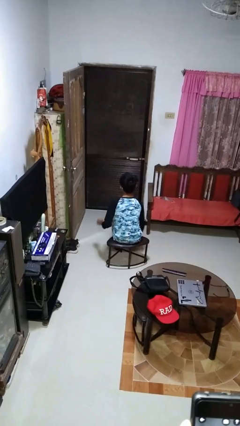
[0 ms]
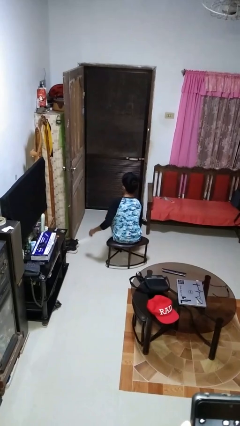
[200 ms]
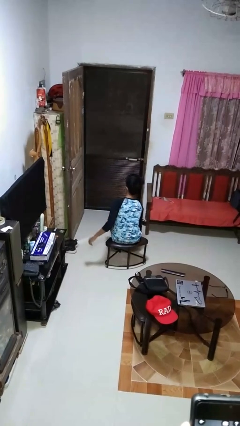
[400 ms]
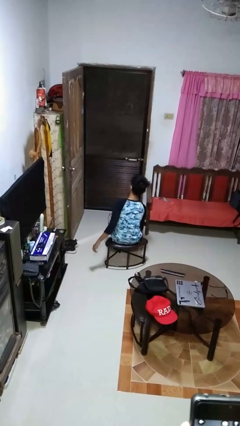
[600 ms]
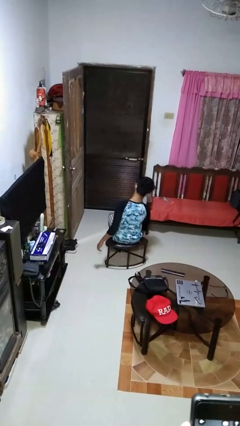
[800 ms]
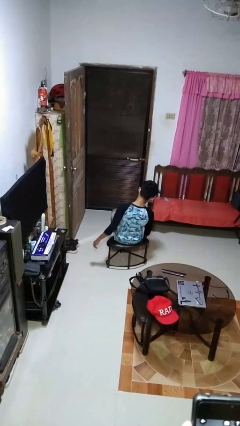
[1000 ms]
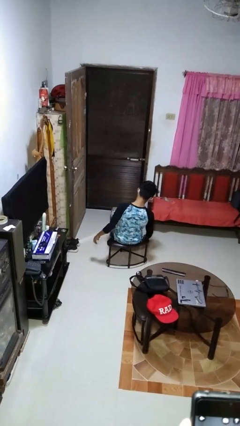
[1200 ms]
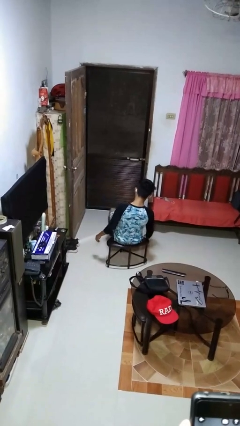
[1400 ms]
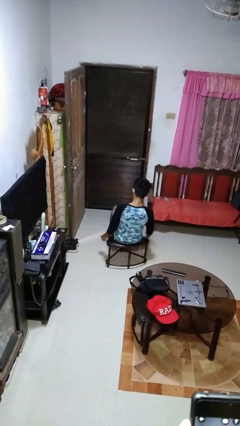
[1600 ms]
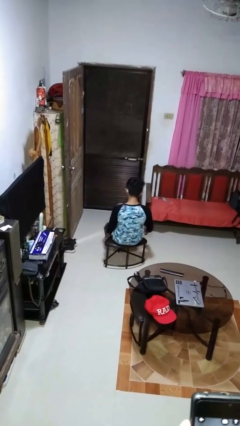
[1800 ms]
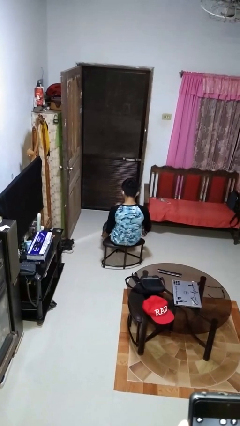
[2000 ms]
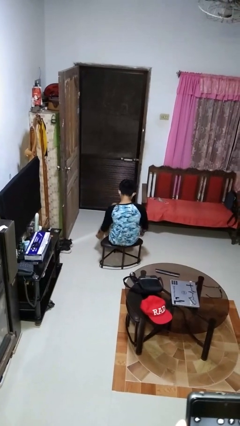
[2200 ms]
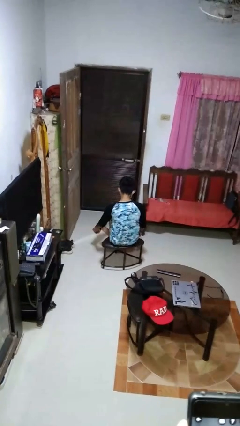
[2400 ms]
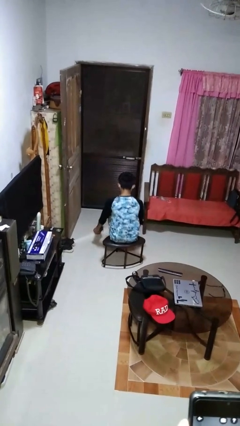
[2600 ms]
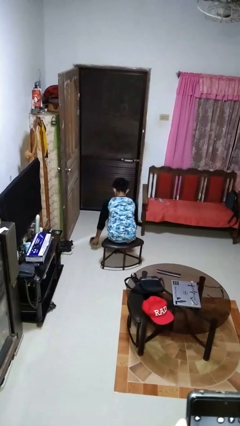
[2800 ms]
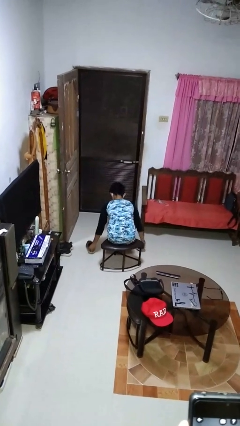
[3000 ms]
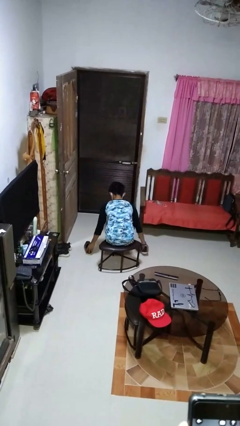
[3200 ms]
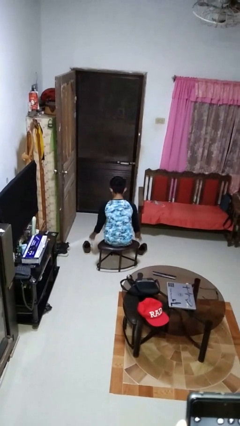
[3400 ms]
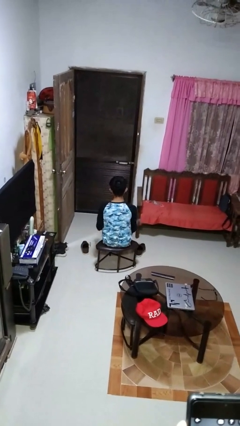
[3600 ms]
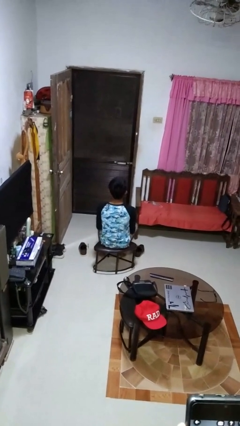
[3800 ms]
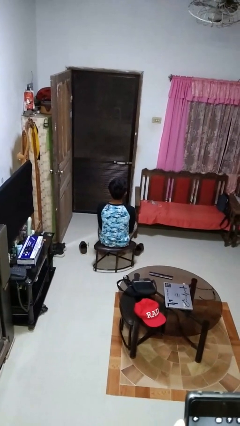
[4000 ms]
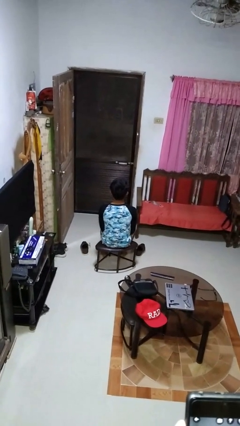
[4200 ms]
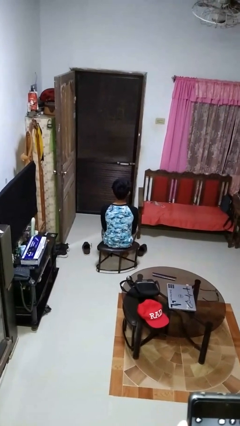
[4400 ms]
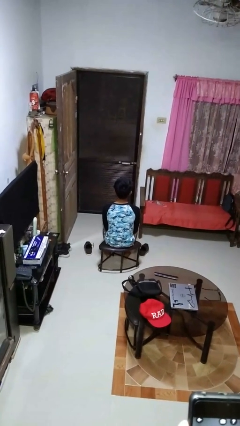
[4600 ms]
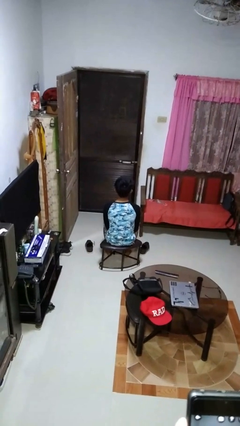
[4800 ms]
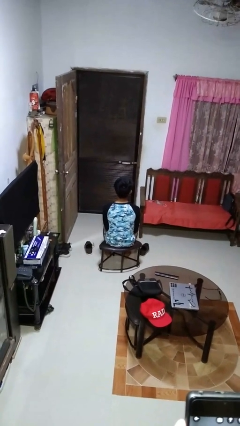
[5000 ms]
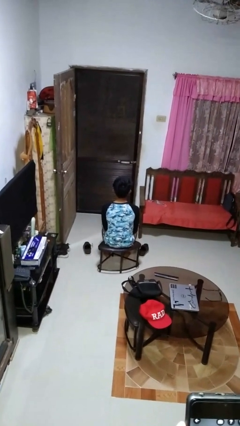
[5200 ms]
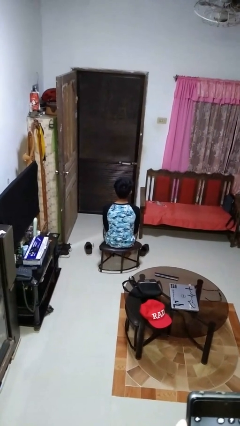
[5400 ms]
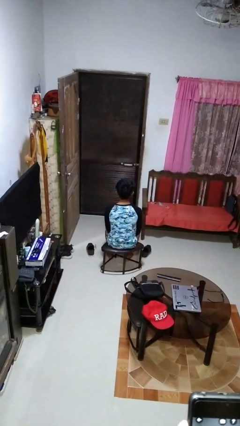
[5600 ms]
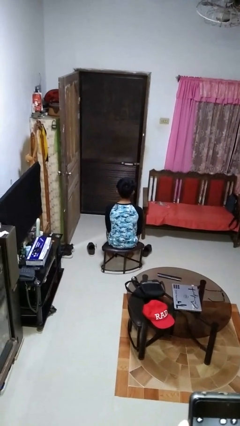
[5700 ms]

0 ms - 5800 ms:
person takes off shoes

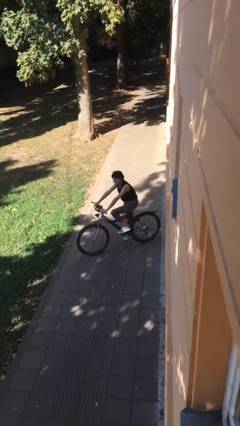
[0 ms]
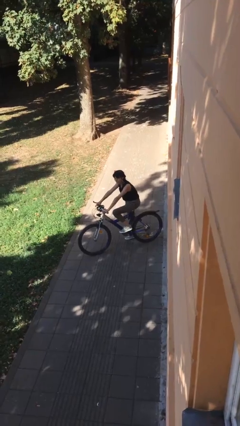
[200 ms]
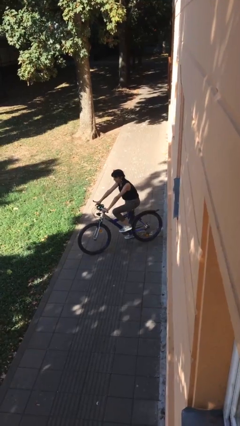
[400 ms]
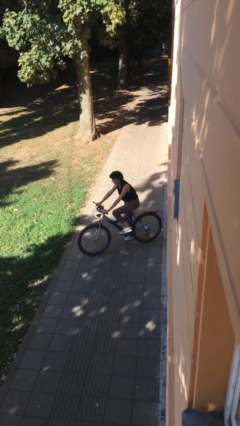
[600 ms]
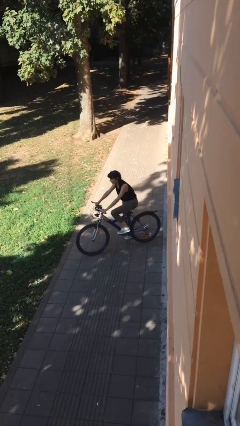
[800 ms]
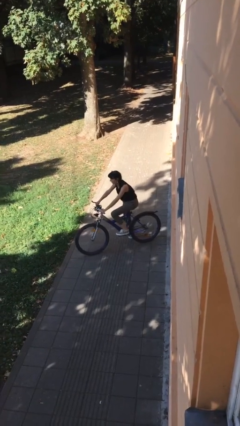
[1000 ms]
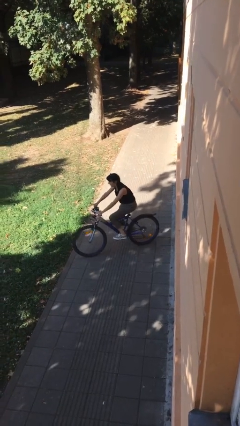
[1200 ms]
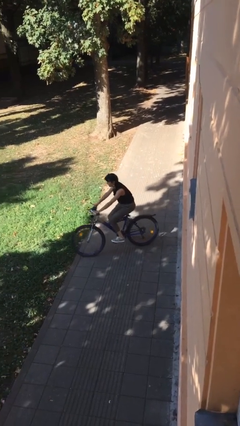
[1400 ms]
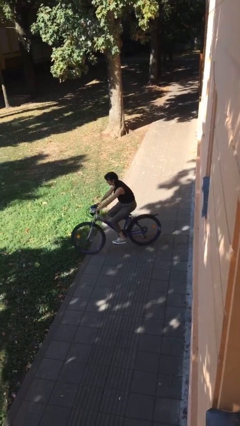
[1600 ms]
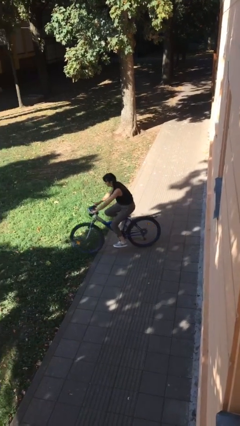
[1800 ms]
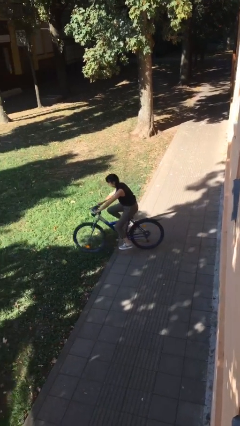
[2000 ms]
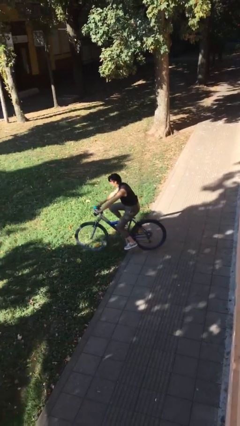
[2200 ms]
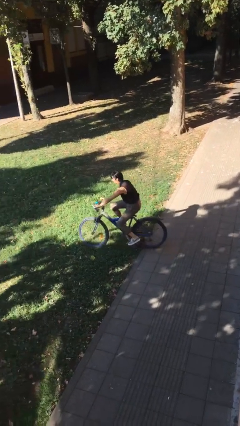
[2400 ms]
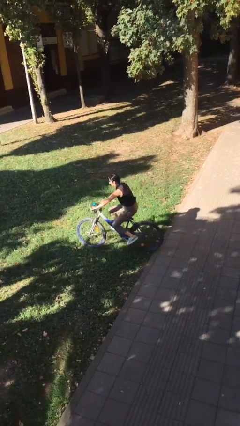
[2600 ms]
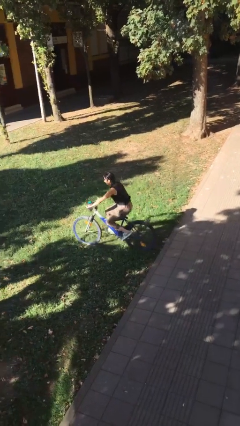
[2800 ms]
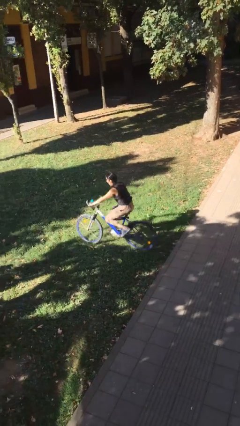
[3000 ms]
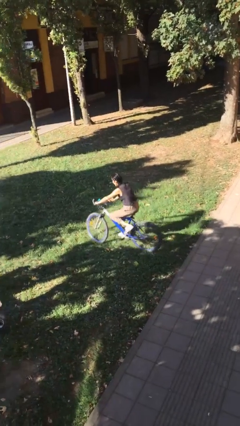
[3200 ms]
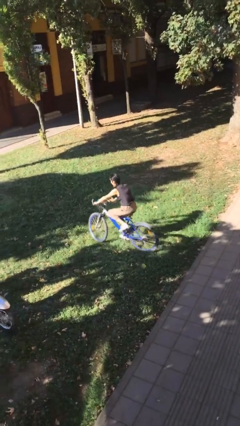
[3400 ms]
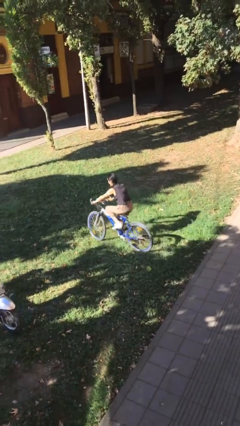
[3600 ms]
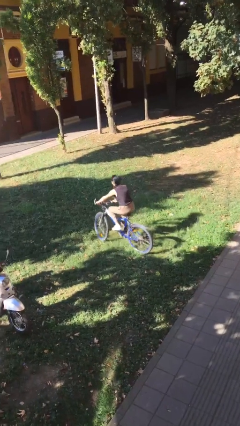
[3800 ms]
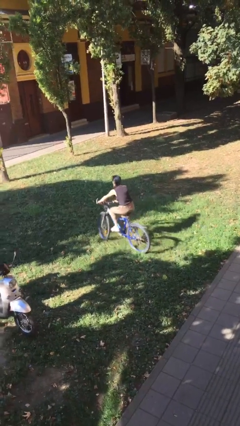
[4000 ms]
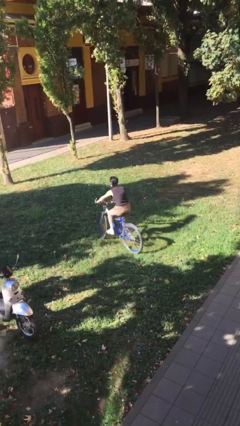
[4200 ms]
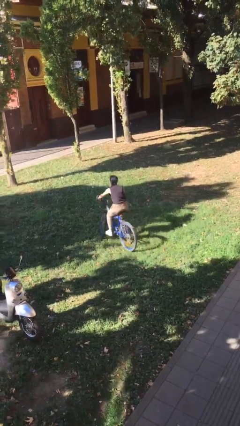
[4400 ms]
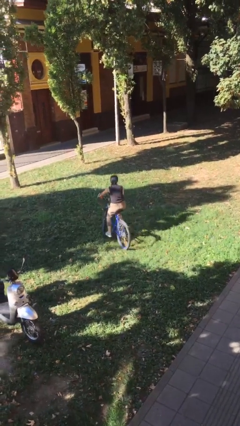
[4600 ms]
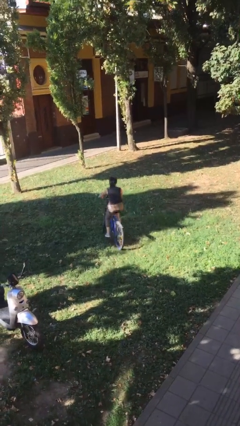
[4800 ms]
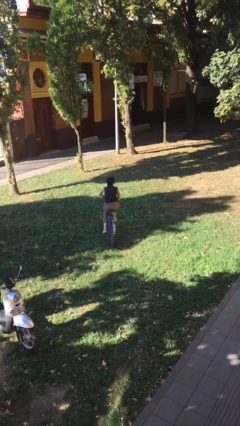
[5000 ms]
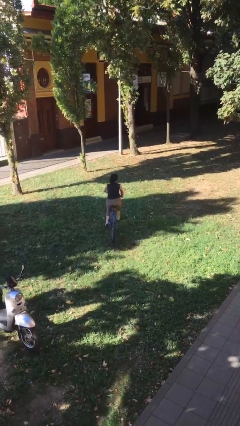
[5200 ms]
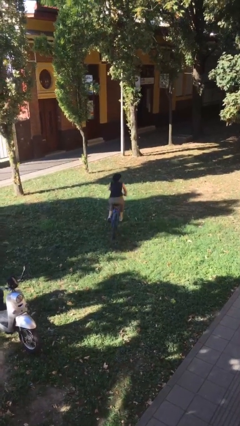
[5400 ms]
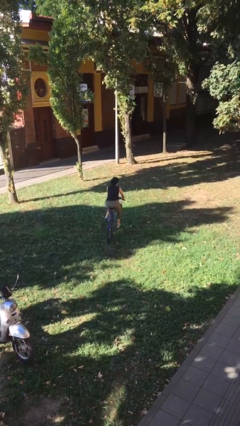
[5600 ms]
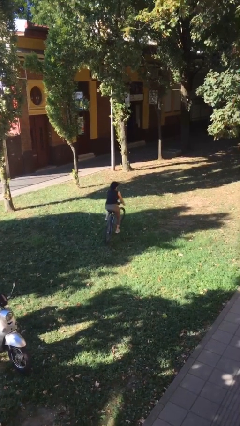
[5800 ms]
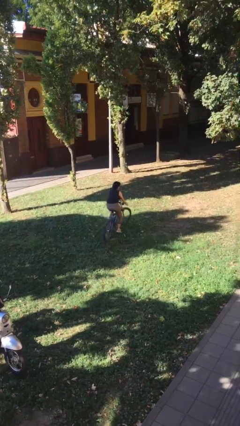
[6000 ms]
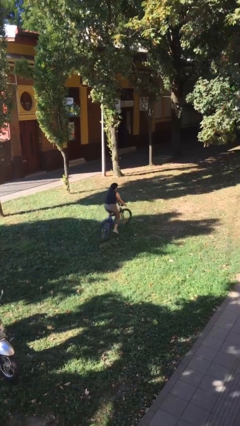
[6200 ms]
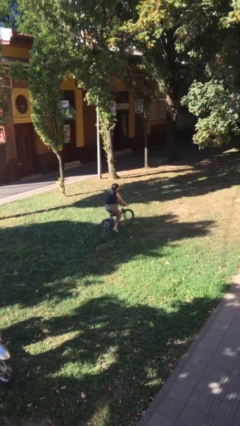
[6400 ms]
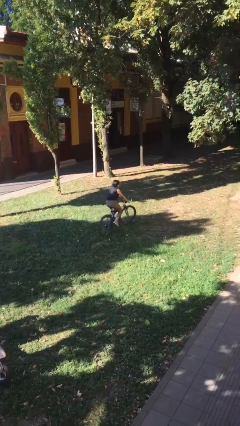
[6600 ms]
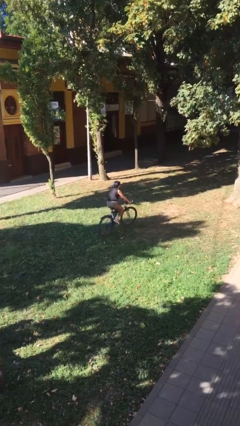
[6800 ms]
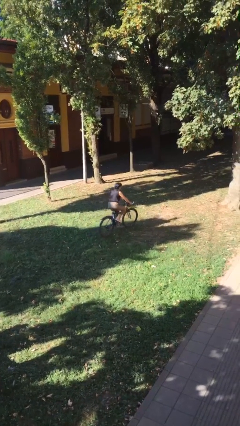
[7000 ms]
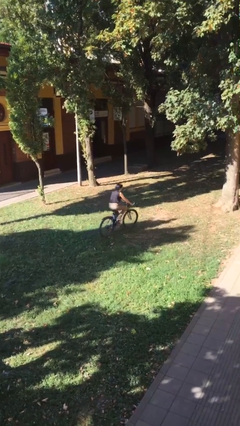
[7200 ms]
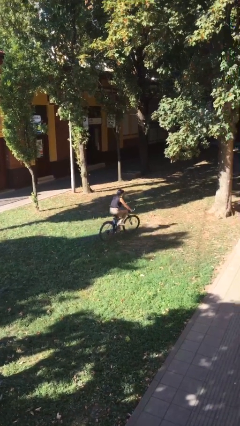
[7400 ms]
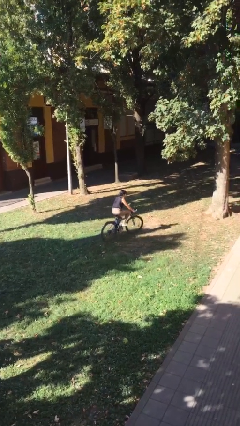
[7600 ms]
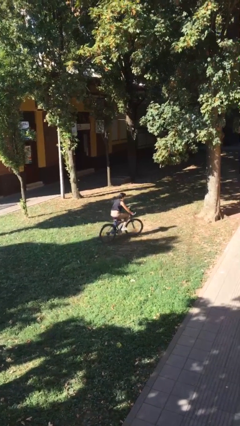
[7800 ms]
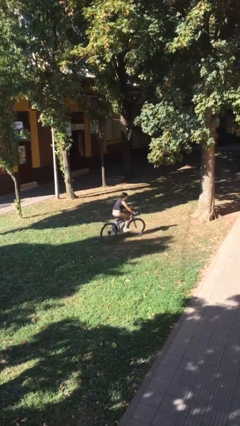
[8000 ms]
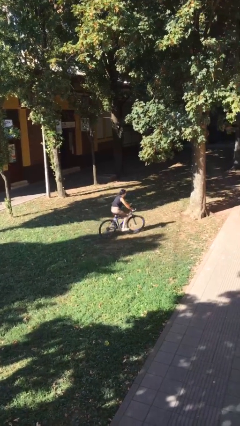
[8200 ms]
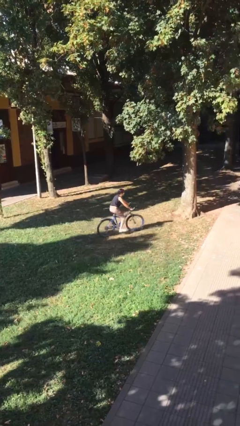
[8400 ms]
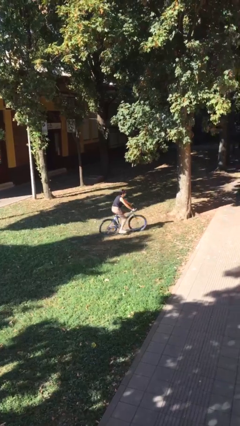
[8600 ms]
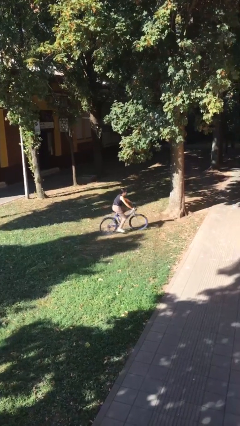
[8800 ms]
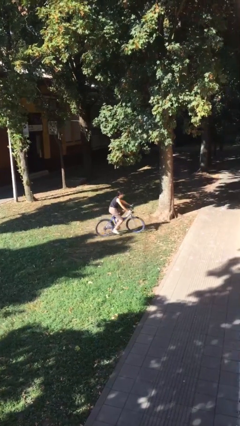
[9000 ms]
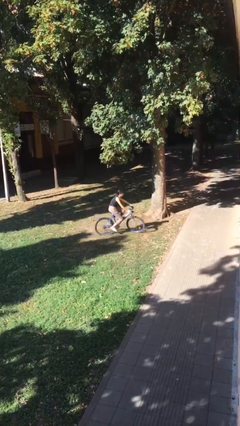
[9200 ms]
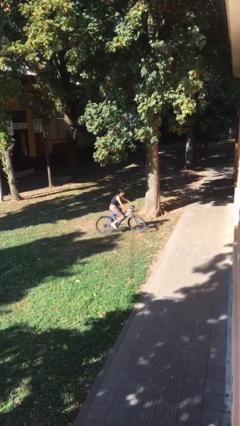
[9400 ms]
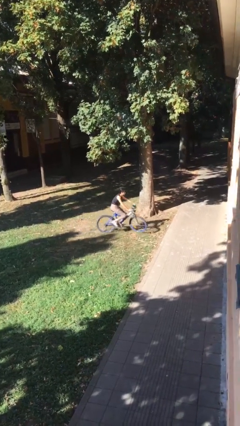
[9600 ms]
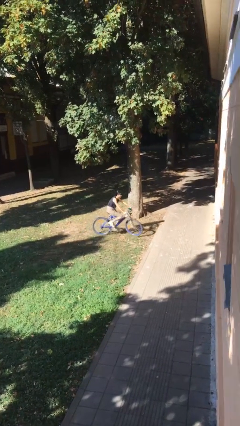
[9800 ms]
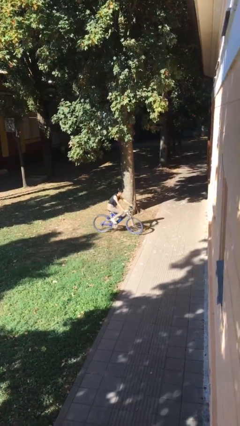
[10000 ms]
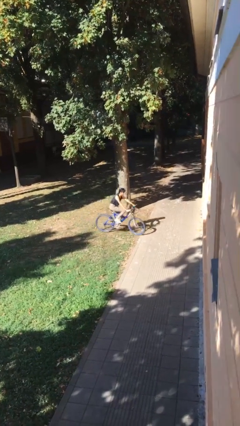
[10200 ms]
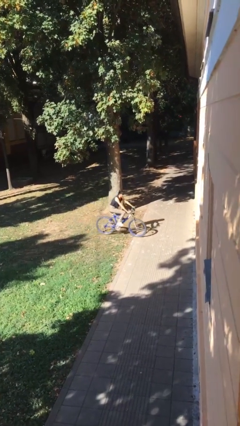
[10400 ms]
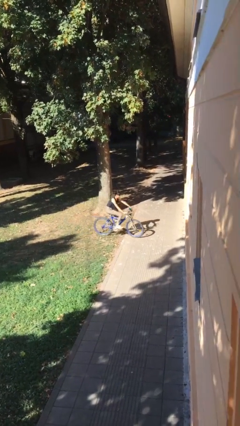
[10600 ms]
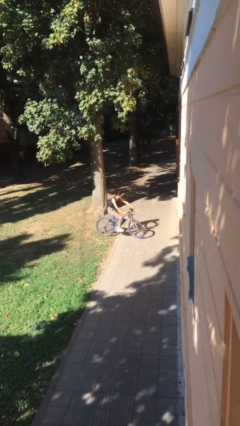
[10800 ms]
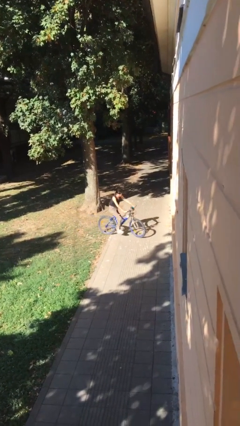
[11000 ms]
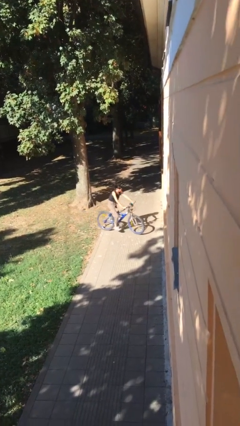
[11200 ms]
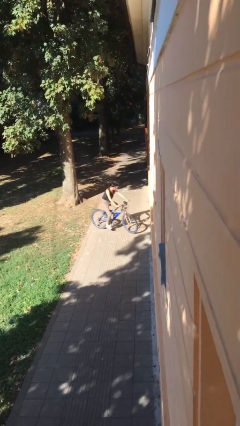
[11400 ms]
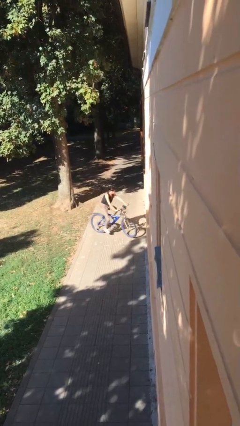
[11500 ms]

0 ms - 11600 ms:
person rides bicycle

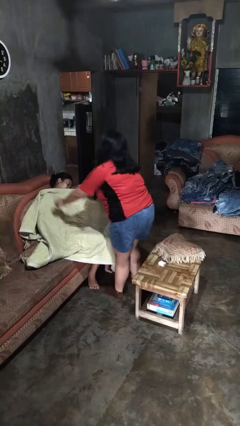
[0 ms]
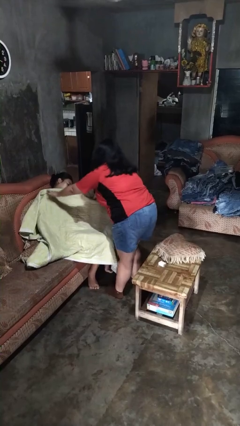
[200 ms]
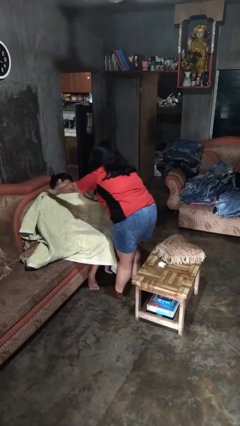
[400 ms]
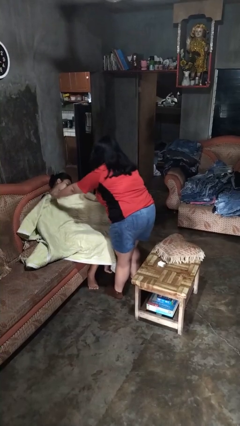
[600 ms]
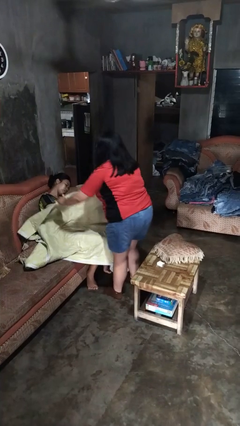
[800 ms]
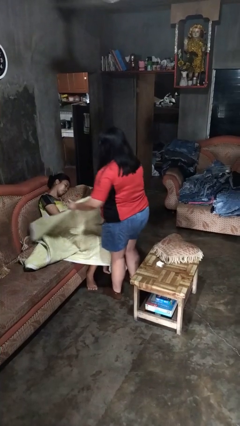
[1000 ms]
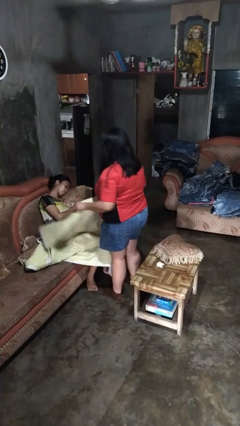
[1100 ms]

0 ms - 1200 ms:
person uncovers friend with blanket
